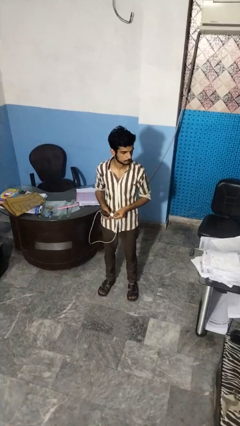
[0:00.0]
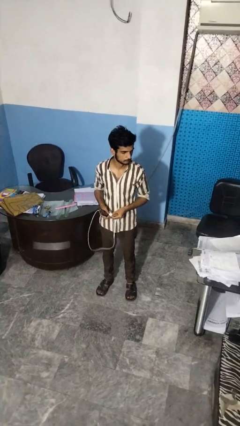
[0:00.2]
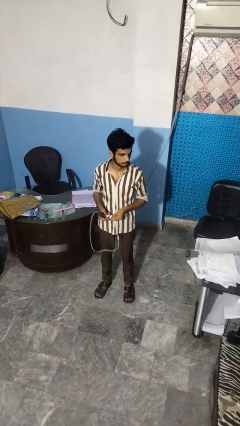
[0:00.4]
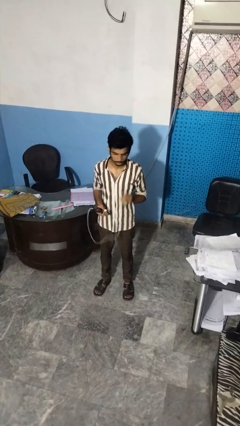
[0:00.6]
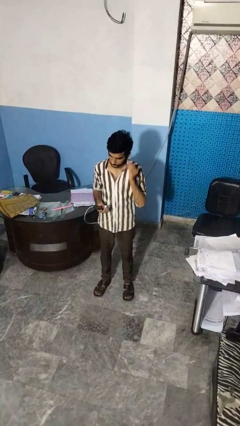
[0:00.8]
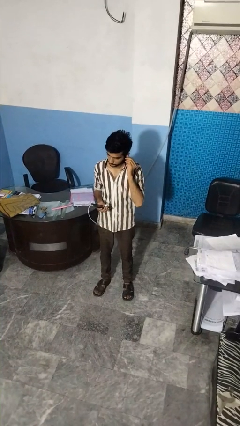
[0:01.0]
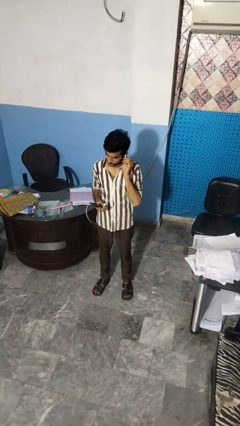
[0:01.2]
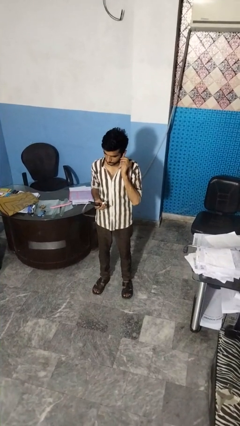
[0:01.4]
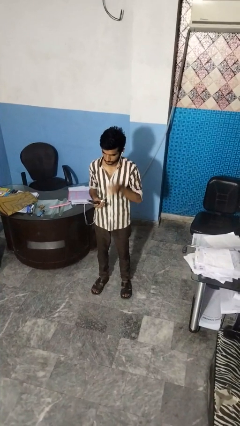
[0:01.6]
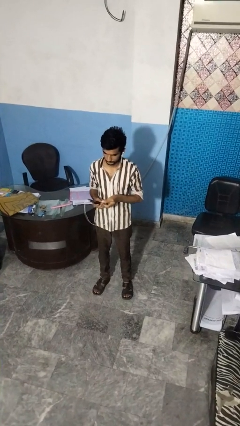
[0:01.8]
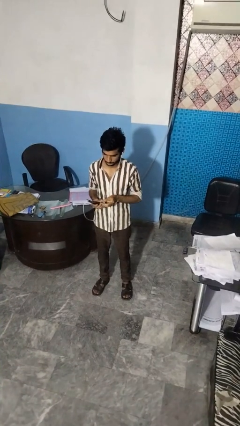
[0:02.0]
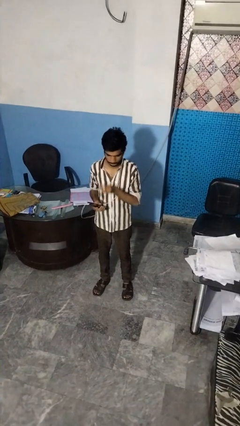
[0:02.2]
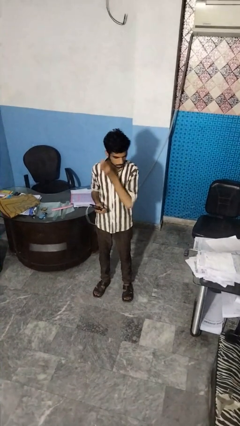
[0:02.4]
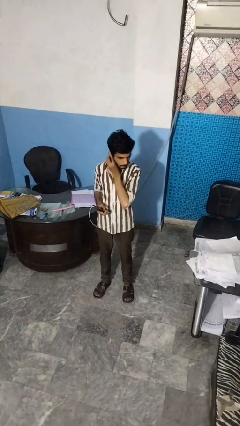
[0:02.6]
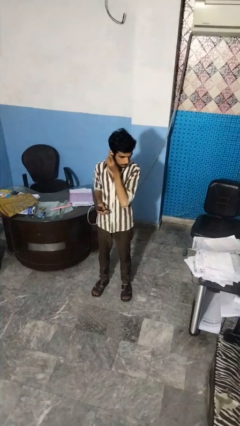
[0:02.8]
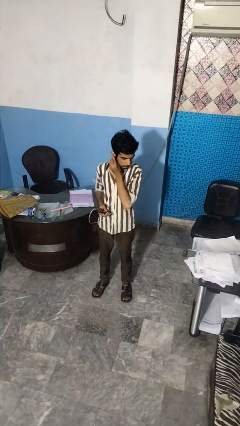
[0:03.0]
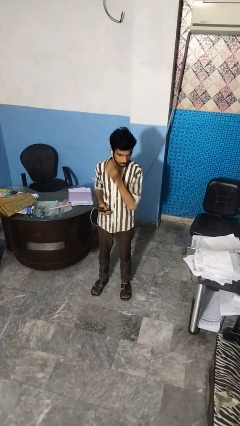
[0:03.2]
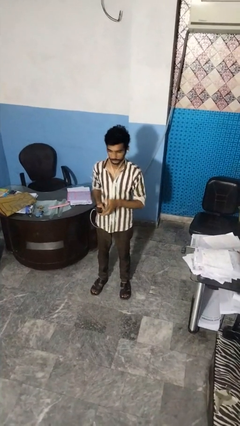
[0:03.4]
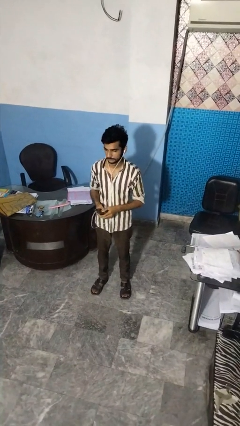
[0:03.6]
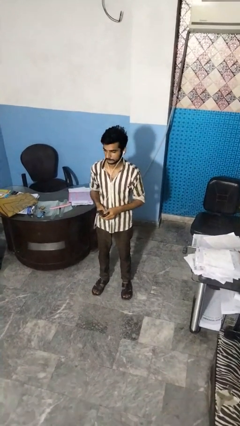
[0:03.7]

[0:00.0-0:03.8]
person puts on headphones

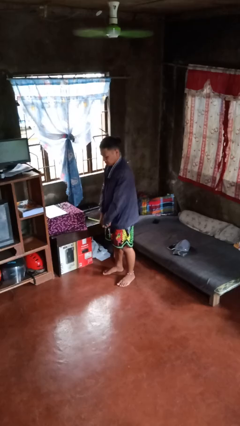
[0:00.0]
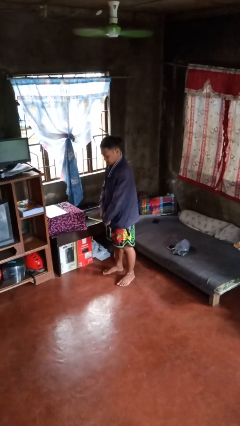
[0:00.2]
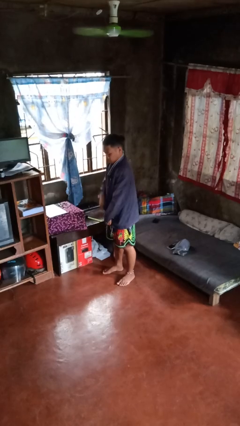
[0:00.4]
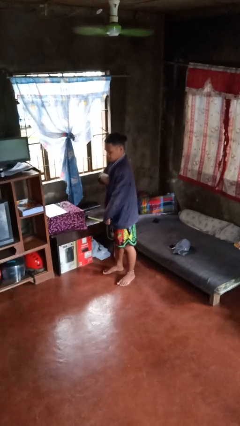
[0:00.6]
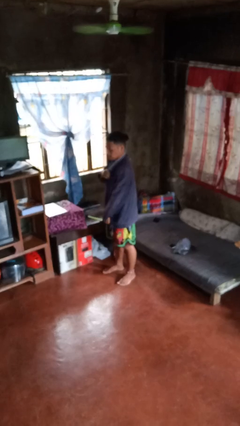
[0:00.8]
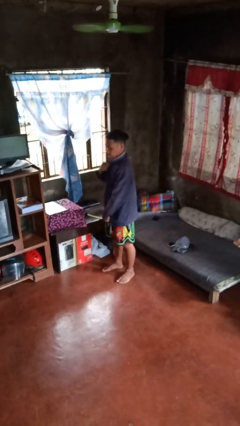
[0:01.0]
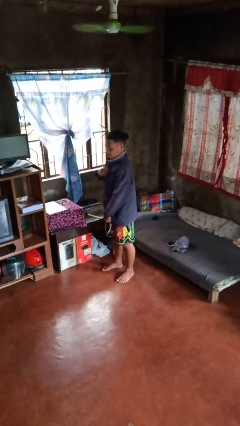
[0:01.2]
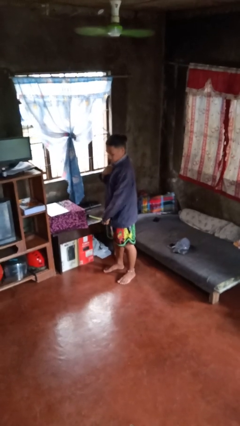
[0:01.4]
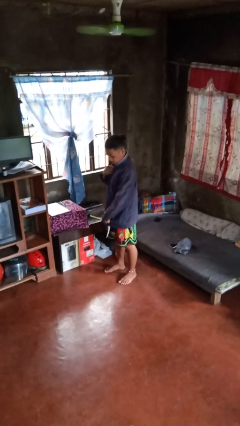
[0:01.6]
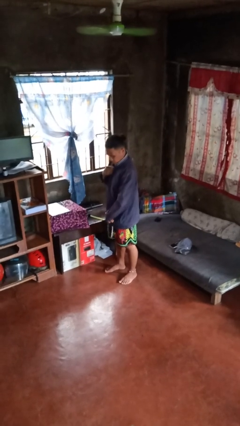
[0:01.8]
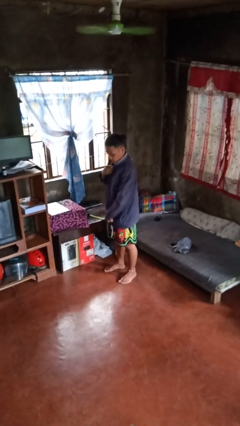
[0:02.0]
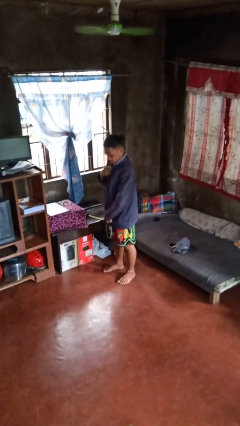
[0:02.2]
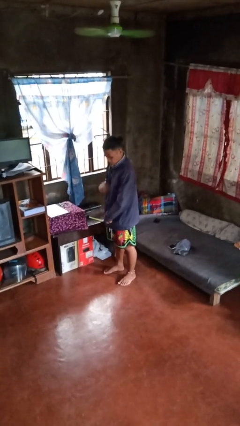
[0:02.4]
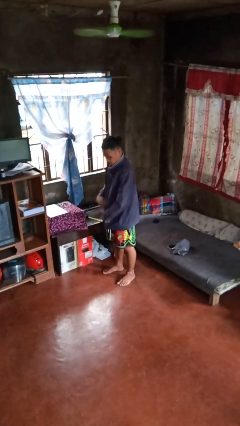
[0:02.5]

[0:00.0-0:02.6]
person zips up jacket

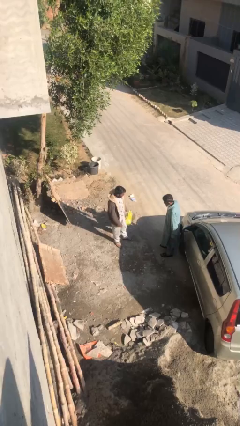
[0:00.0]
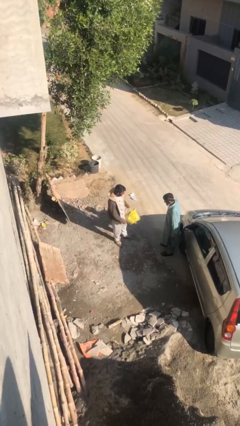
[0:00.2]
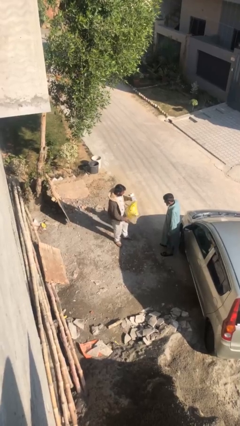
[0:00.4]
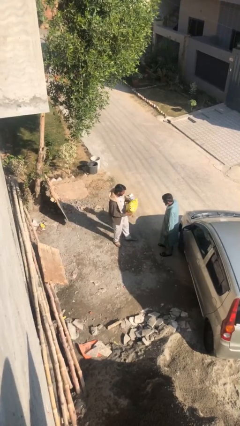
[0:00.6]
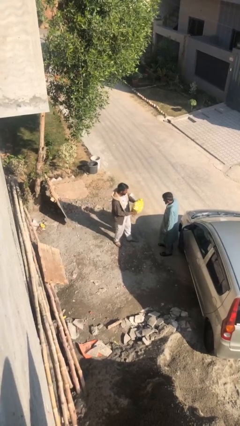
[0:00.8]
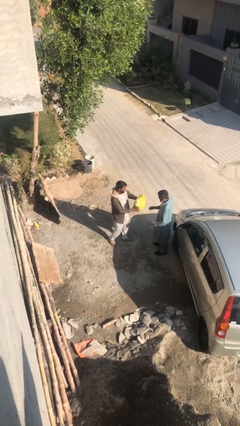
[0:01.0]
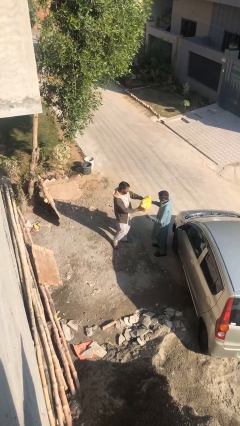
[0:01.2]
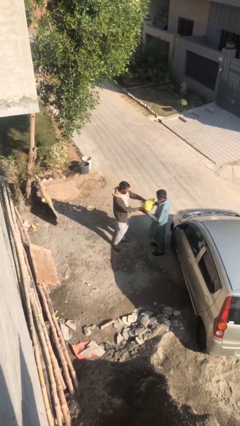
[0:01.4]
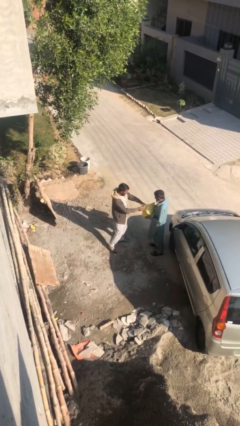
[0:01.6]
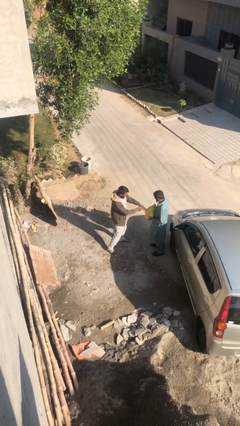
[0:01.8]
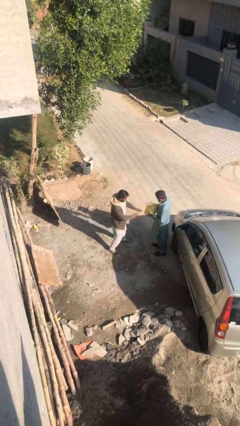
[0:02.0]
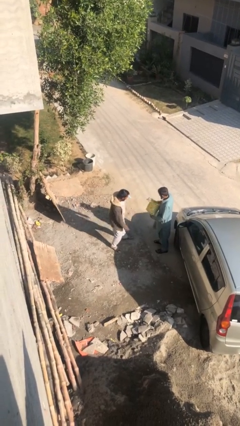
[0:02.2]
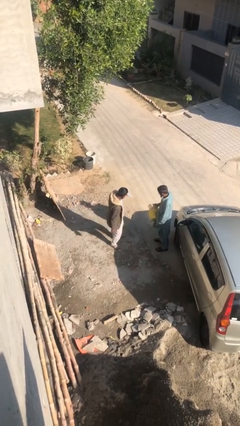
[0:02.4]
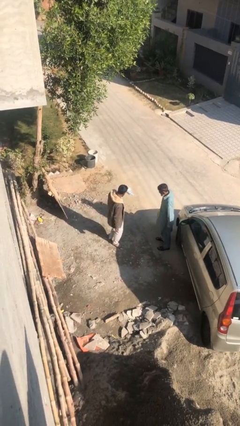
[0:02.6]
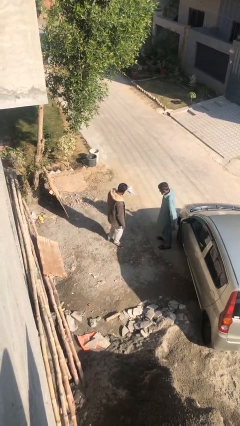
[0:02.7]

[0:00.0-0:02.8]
person transfers object to person

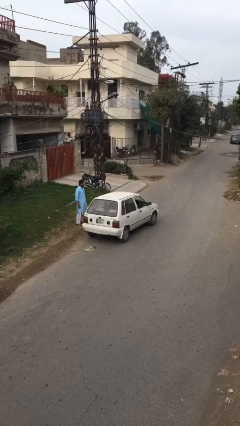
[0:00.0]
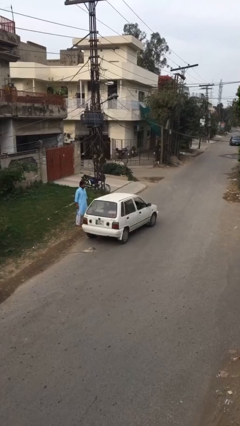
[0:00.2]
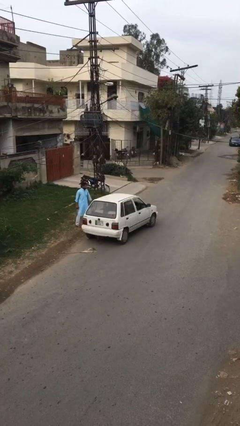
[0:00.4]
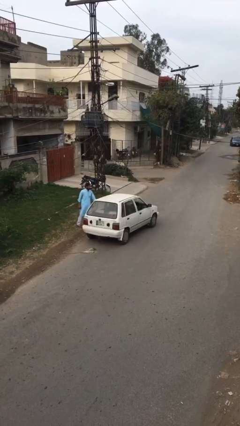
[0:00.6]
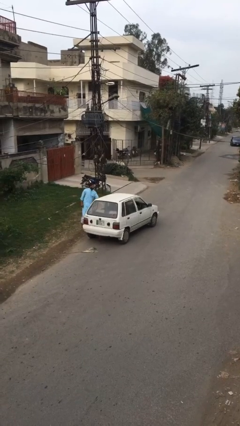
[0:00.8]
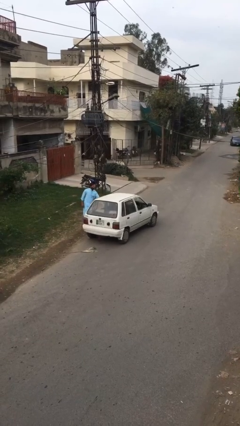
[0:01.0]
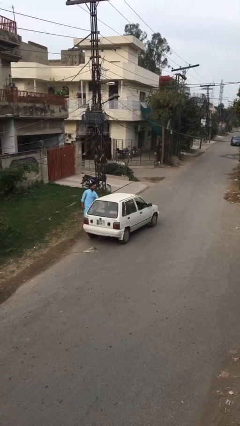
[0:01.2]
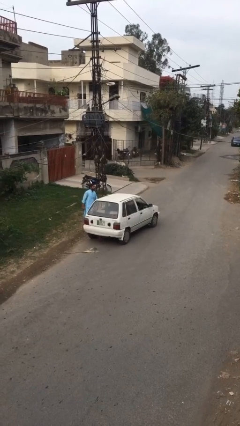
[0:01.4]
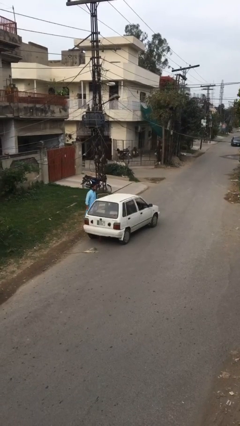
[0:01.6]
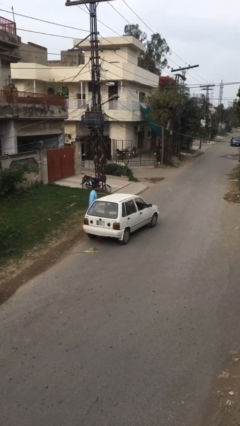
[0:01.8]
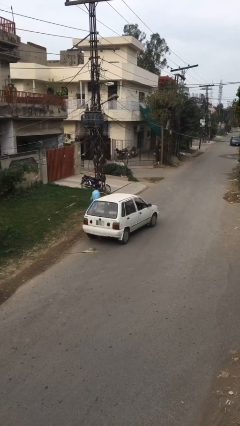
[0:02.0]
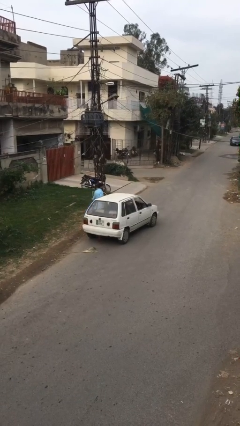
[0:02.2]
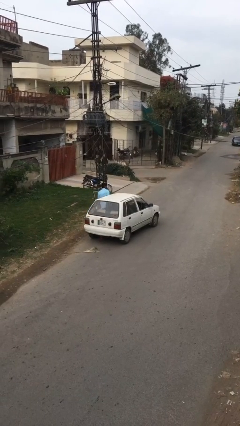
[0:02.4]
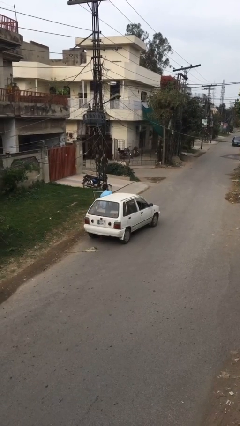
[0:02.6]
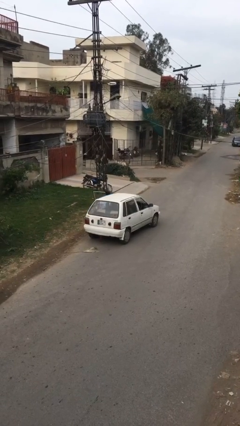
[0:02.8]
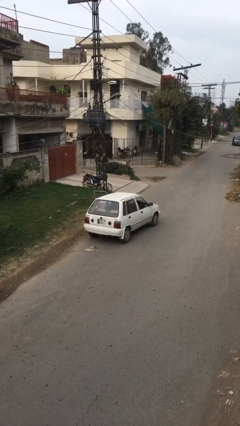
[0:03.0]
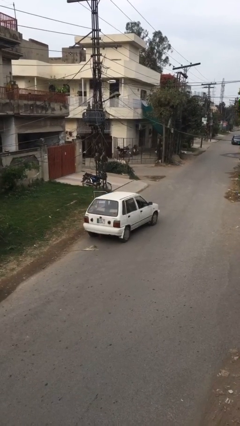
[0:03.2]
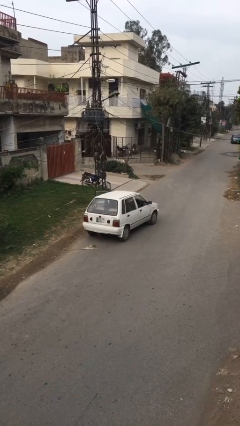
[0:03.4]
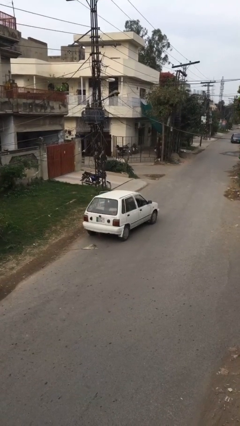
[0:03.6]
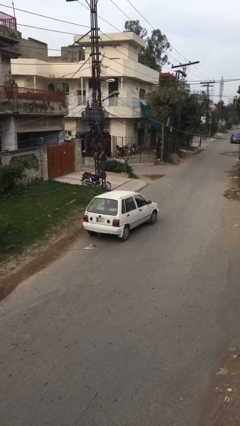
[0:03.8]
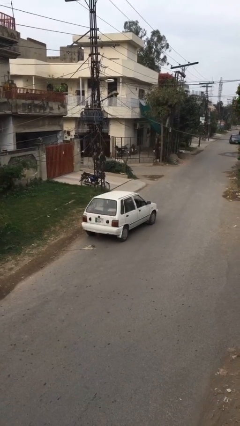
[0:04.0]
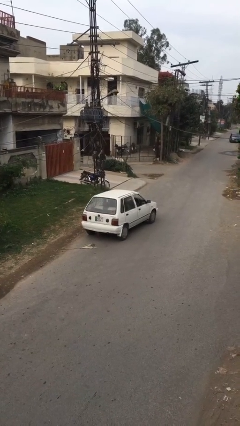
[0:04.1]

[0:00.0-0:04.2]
car picks up person

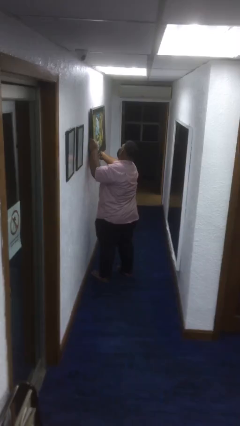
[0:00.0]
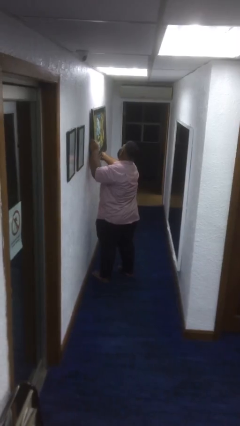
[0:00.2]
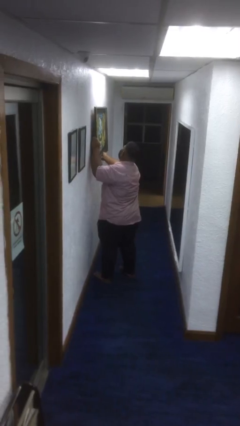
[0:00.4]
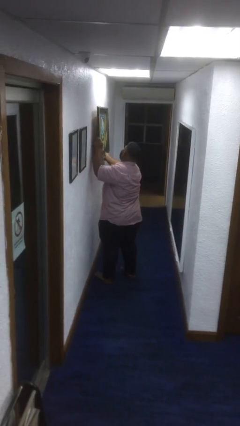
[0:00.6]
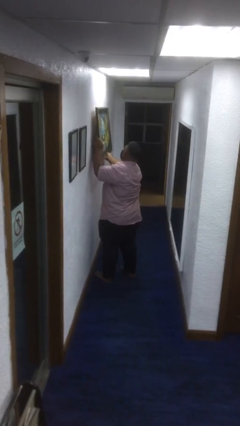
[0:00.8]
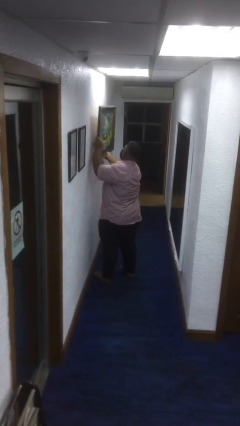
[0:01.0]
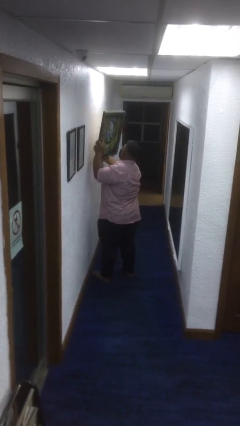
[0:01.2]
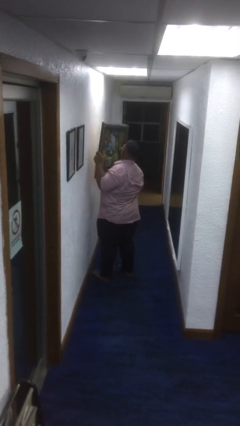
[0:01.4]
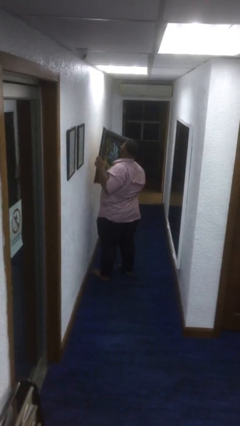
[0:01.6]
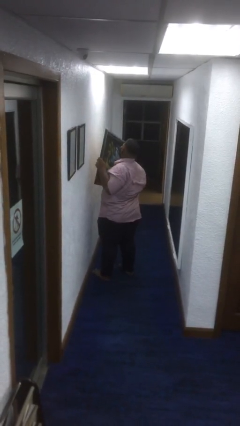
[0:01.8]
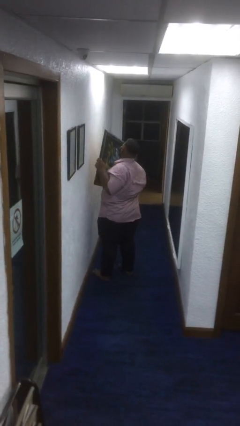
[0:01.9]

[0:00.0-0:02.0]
person takes down picture frame

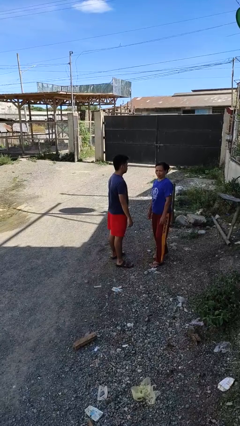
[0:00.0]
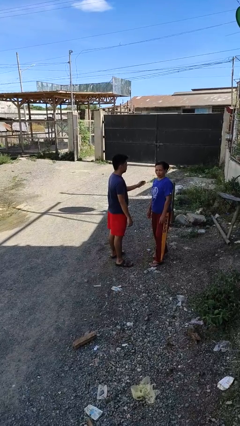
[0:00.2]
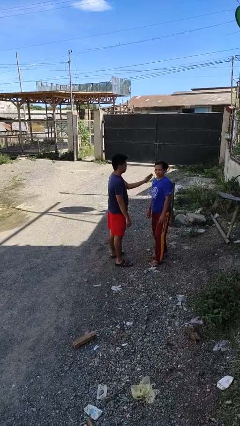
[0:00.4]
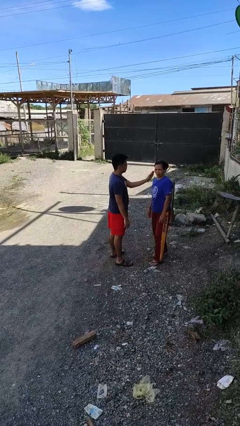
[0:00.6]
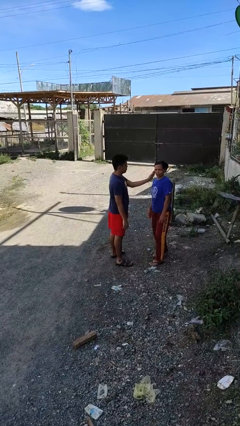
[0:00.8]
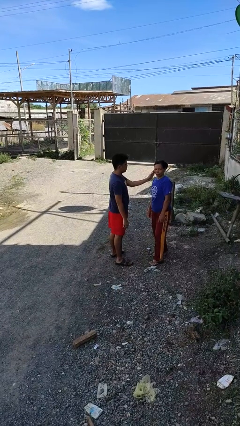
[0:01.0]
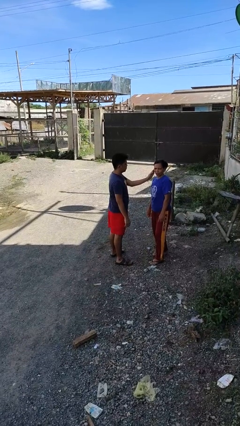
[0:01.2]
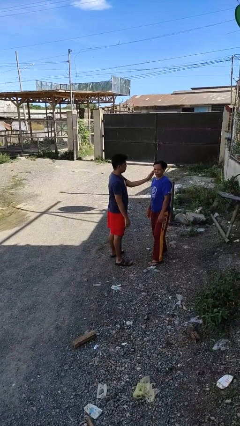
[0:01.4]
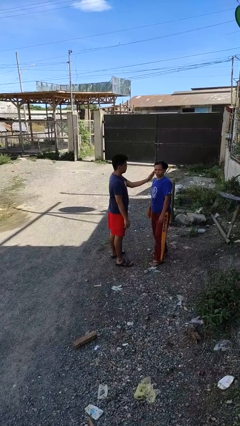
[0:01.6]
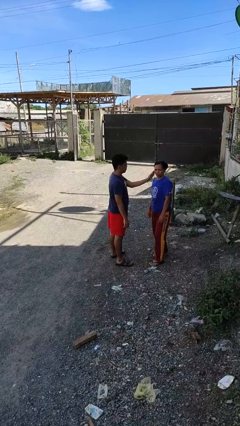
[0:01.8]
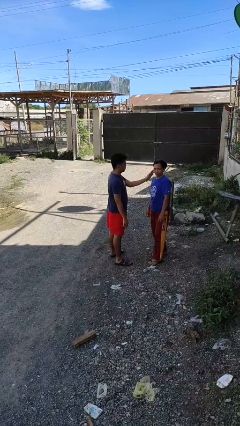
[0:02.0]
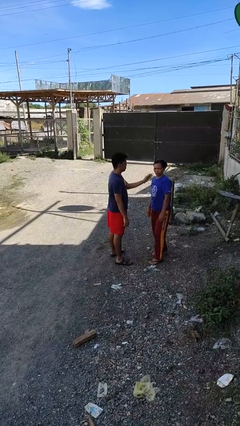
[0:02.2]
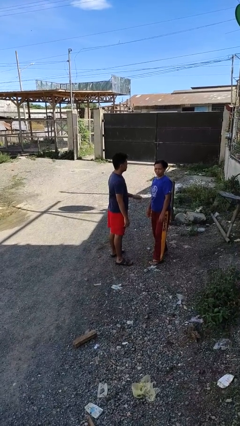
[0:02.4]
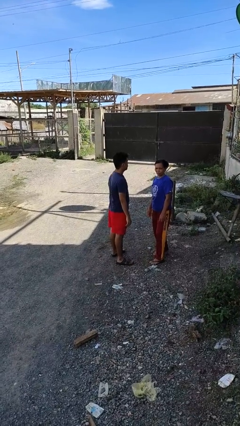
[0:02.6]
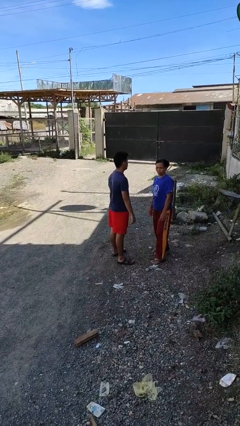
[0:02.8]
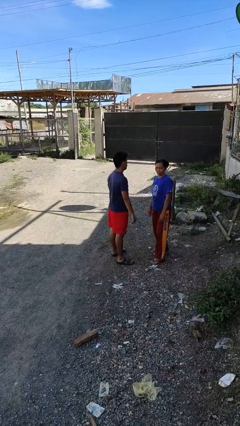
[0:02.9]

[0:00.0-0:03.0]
person touches face of person
